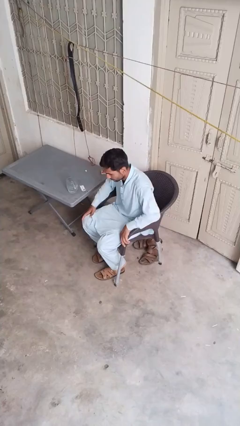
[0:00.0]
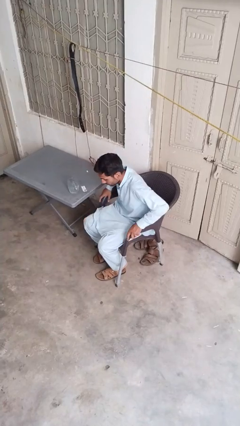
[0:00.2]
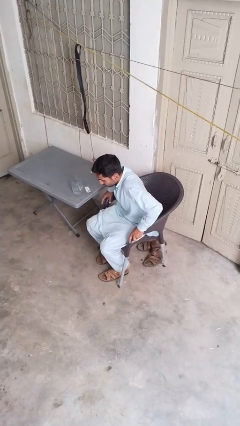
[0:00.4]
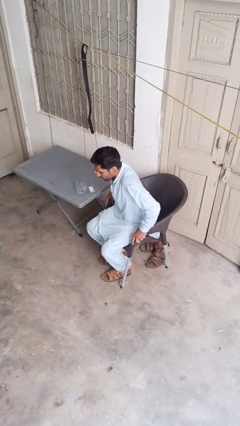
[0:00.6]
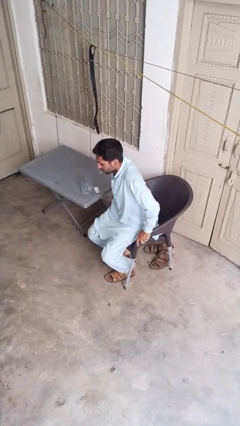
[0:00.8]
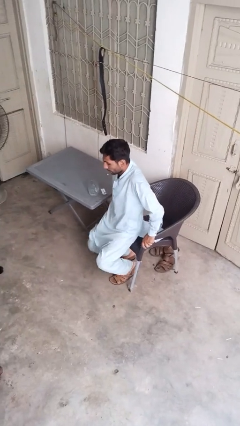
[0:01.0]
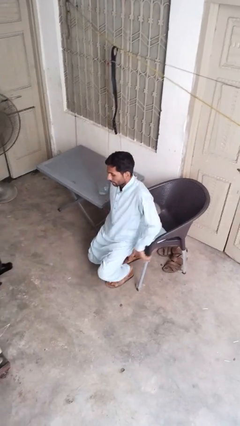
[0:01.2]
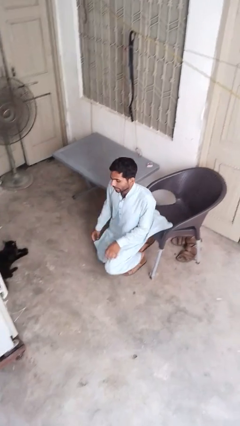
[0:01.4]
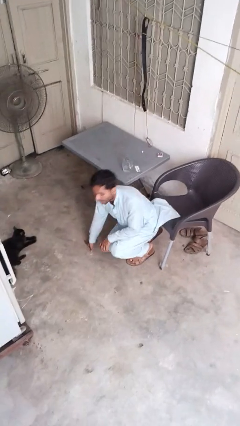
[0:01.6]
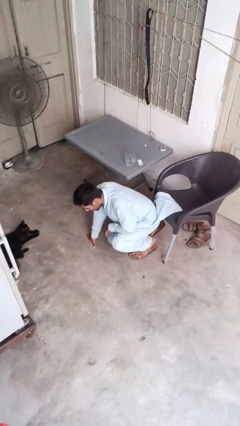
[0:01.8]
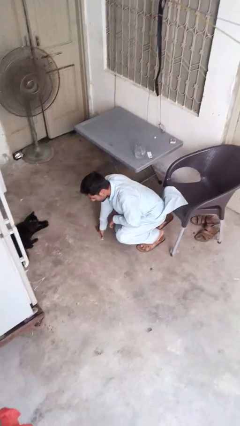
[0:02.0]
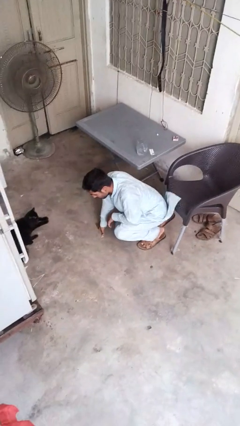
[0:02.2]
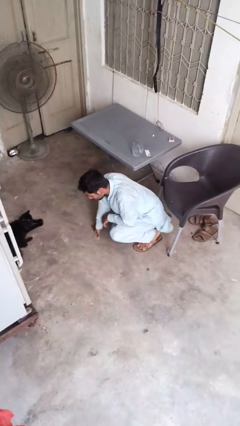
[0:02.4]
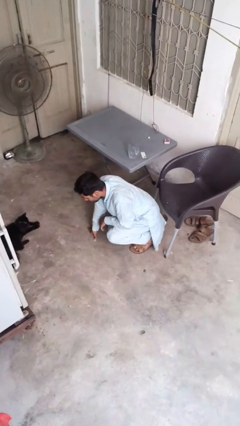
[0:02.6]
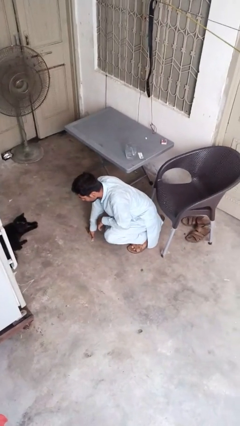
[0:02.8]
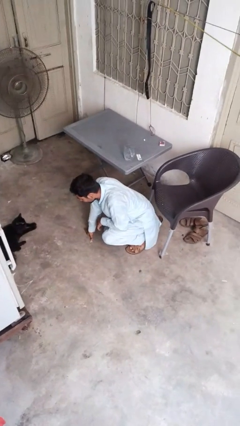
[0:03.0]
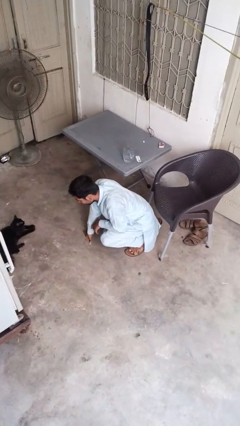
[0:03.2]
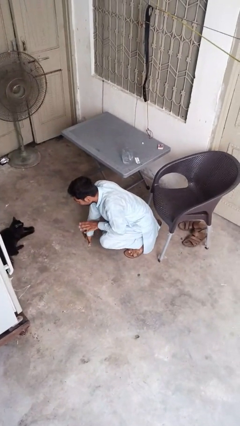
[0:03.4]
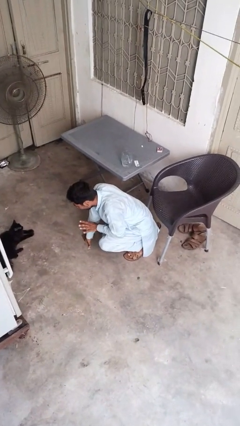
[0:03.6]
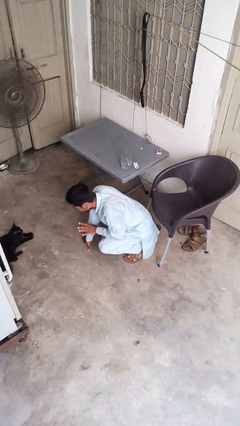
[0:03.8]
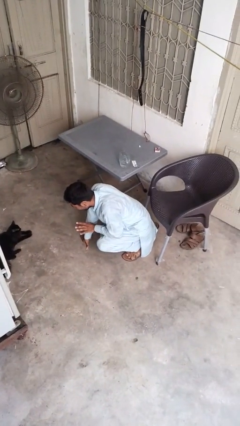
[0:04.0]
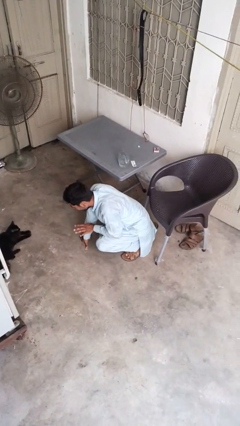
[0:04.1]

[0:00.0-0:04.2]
person falls from chair

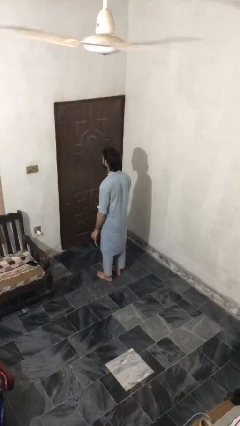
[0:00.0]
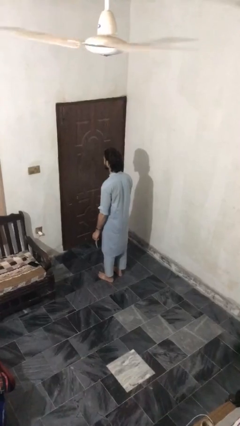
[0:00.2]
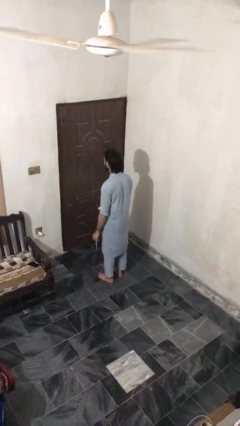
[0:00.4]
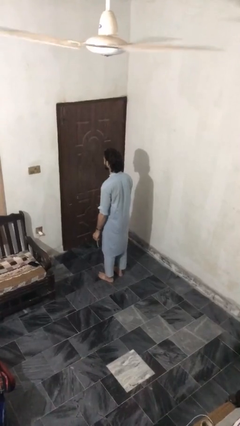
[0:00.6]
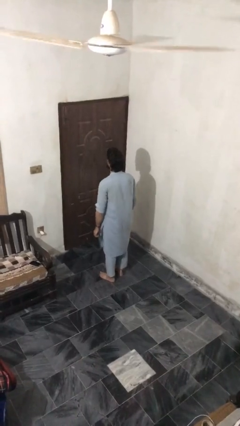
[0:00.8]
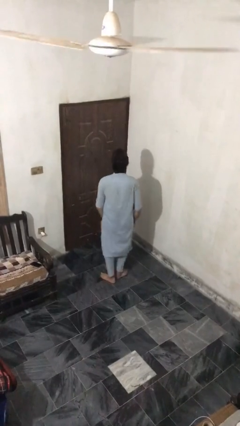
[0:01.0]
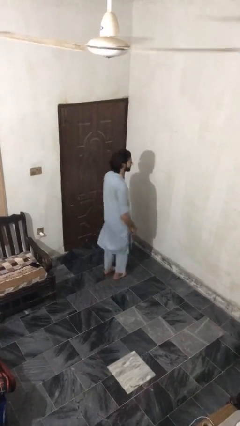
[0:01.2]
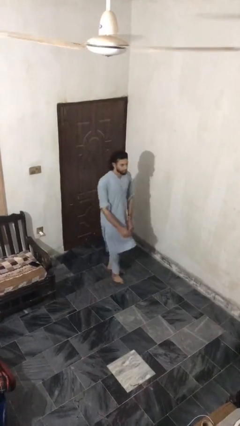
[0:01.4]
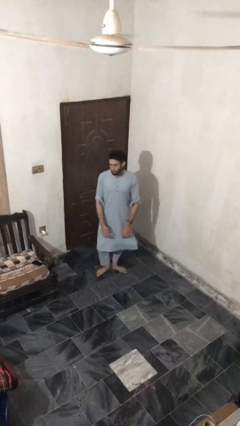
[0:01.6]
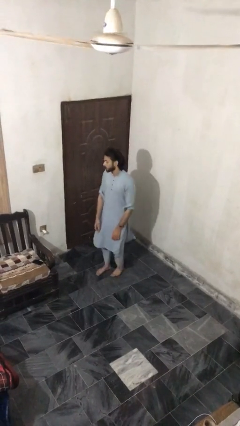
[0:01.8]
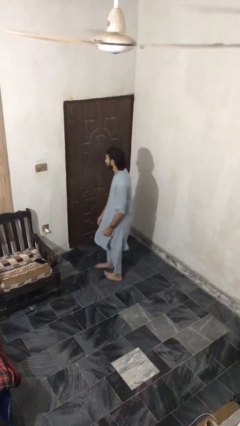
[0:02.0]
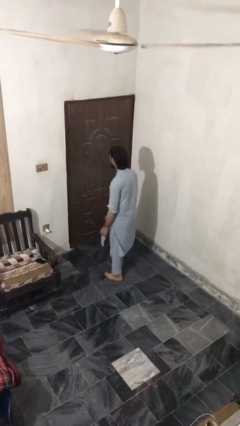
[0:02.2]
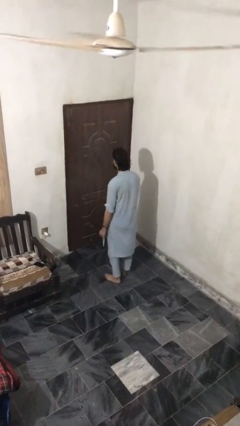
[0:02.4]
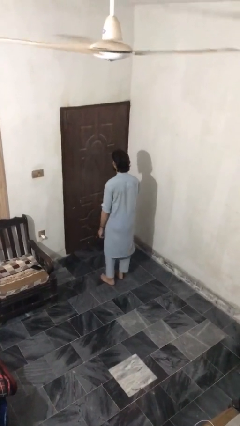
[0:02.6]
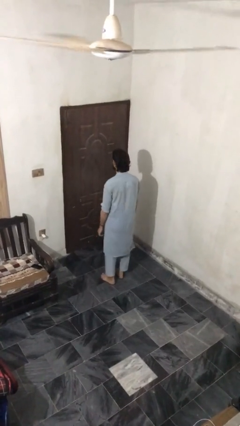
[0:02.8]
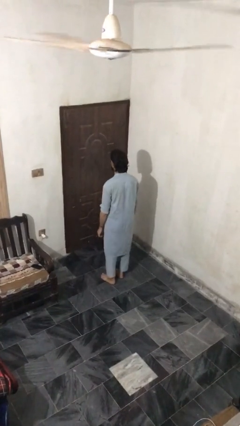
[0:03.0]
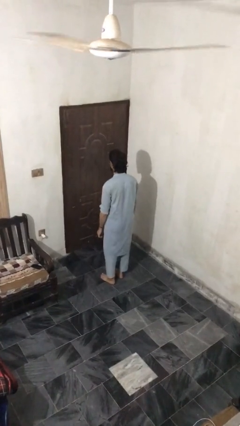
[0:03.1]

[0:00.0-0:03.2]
person twirls

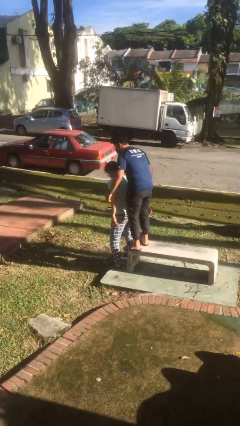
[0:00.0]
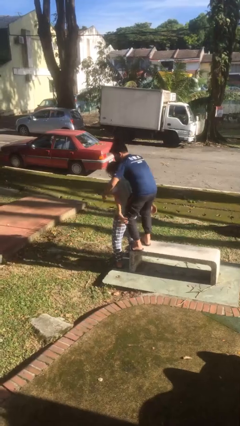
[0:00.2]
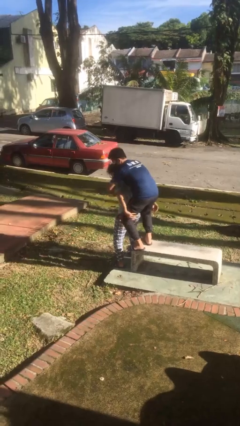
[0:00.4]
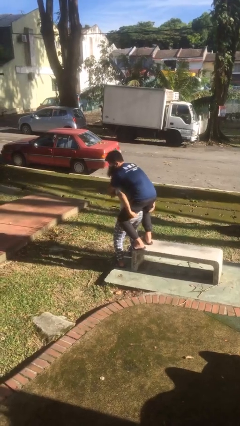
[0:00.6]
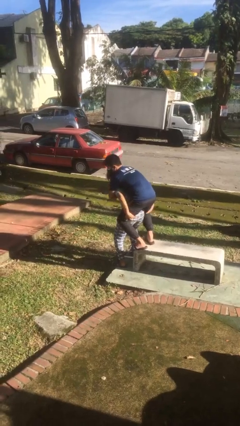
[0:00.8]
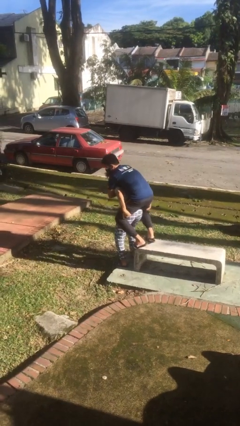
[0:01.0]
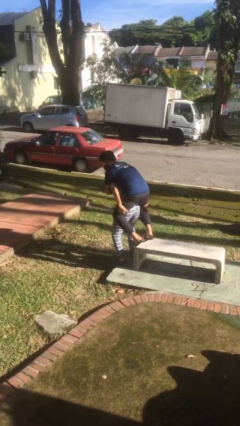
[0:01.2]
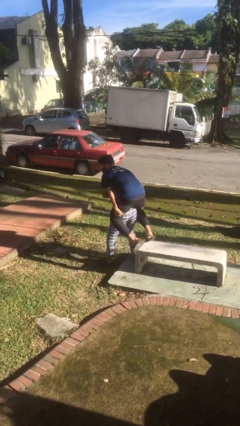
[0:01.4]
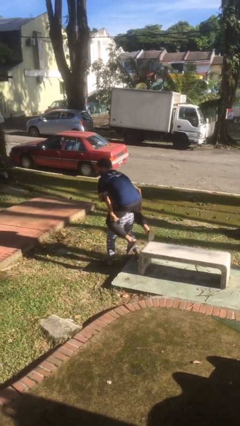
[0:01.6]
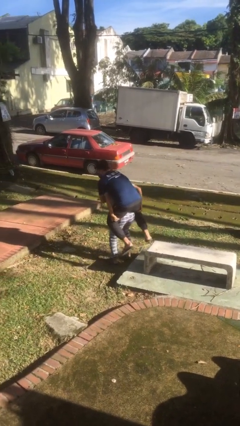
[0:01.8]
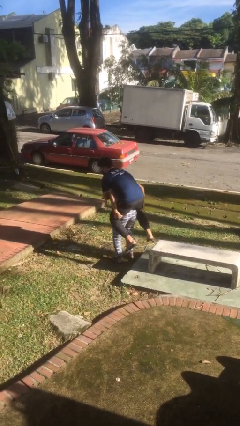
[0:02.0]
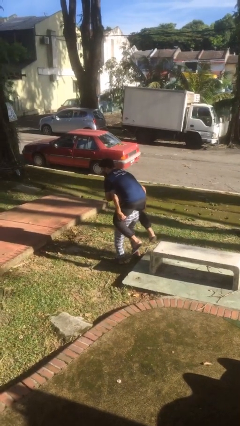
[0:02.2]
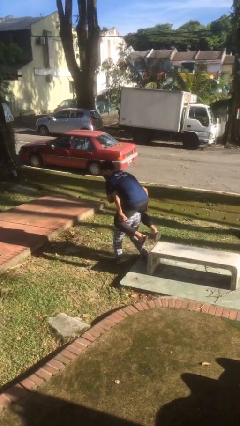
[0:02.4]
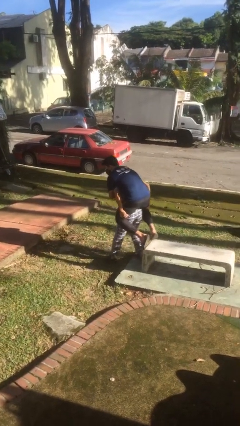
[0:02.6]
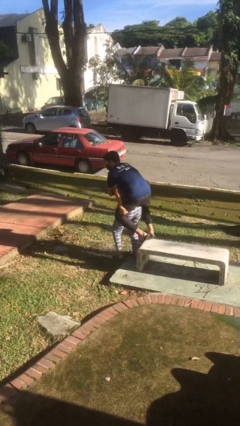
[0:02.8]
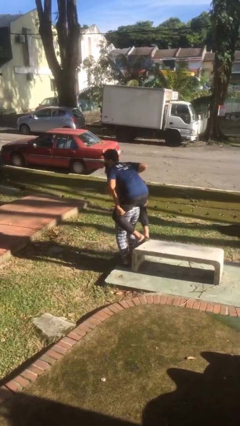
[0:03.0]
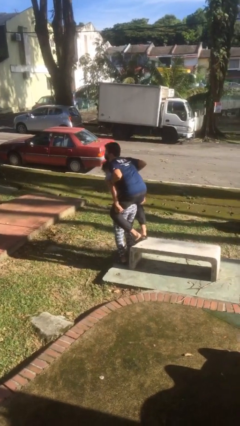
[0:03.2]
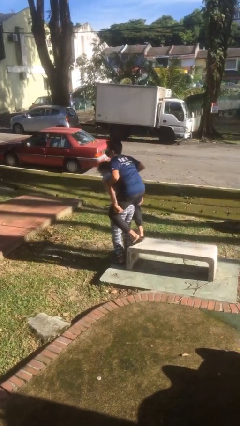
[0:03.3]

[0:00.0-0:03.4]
person carries person on shoulders

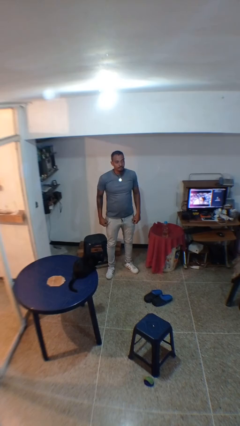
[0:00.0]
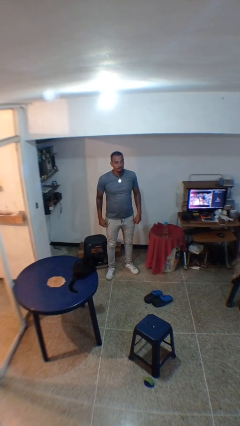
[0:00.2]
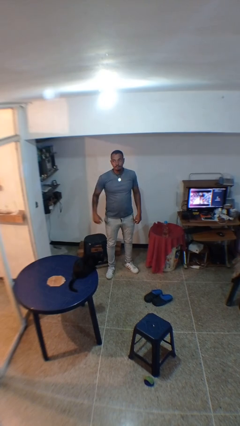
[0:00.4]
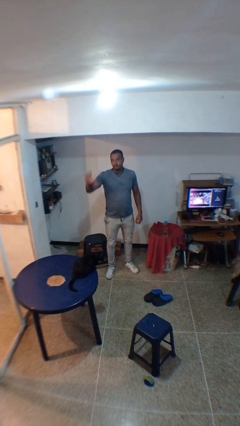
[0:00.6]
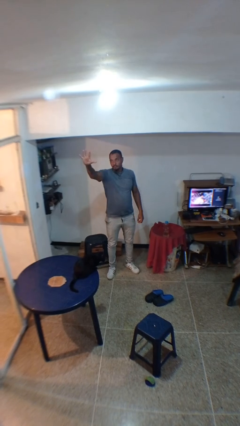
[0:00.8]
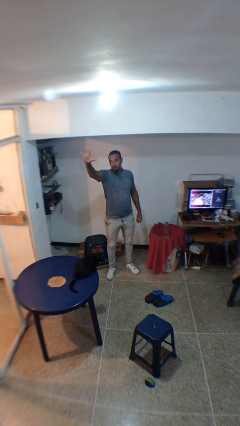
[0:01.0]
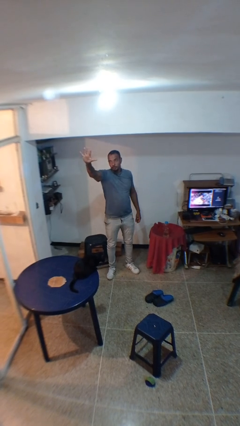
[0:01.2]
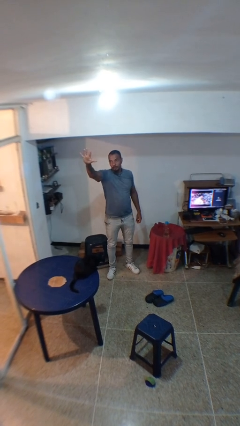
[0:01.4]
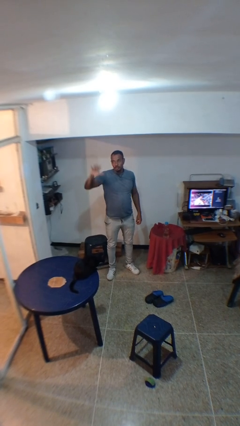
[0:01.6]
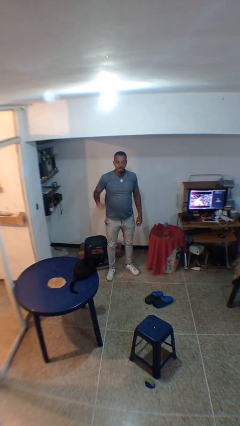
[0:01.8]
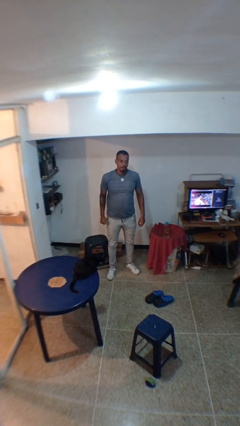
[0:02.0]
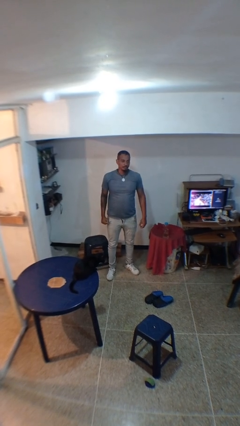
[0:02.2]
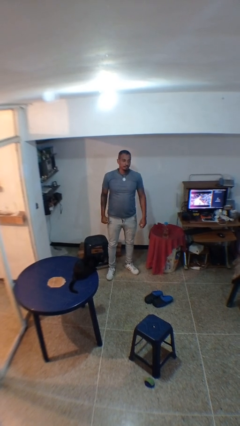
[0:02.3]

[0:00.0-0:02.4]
person gestures number five

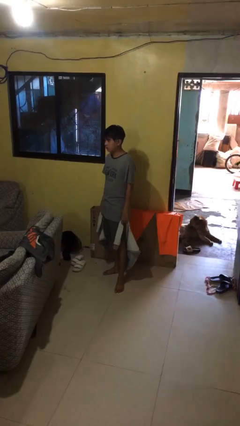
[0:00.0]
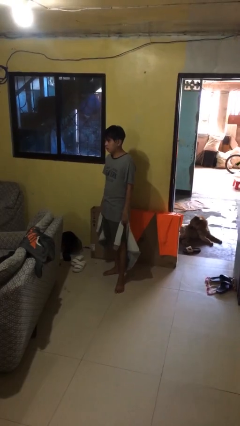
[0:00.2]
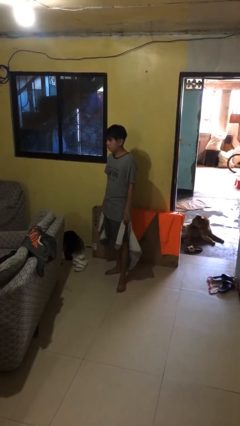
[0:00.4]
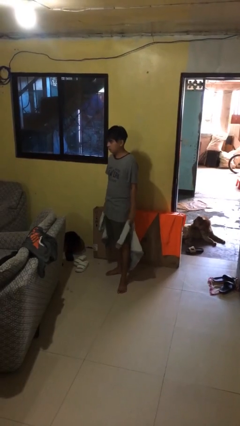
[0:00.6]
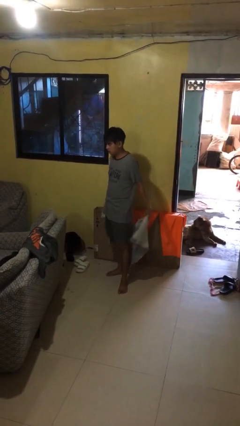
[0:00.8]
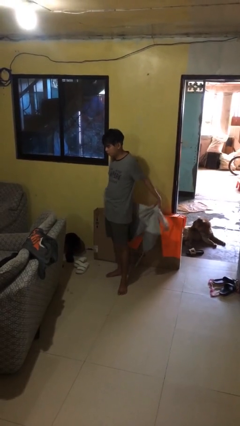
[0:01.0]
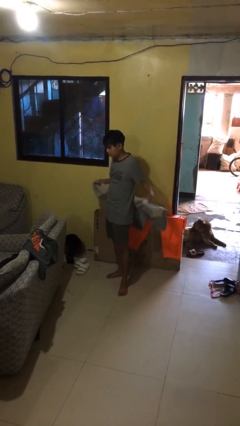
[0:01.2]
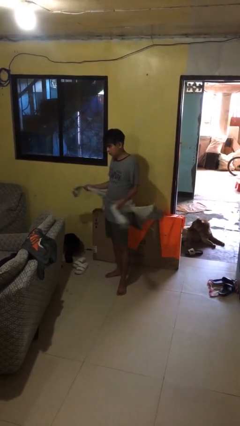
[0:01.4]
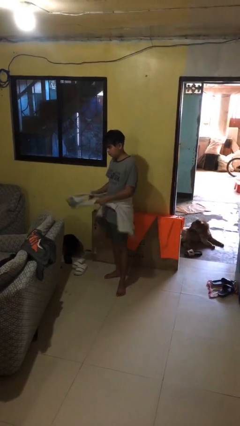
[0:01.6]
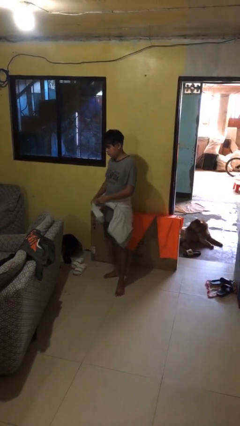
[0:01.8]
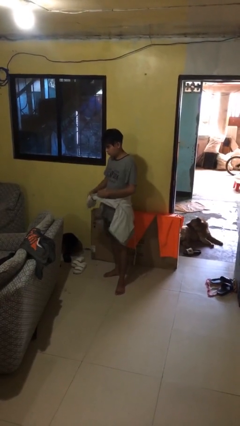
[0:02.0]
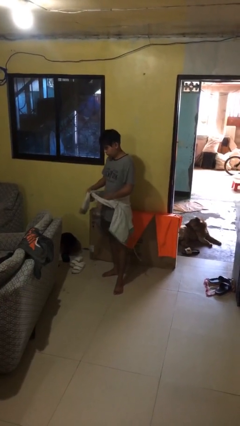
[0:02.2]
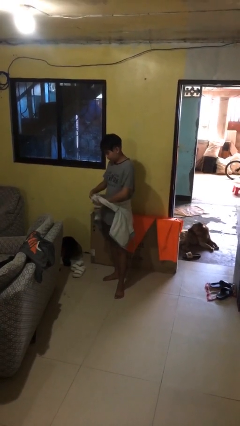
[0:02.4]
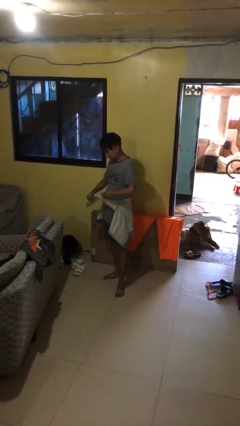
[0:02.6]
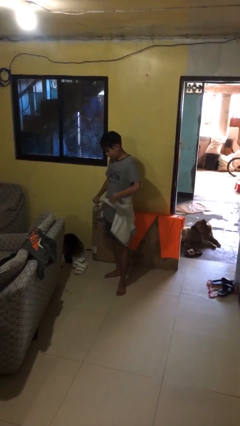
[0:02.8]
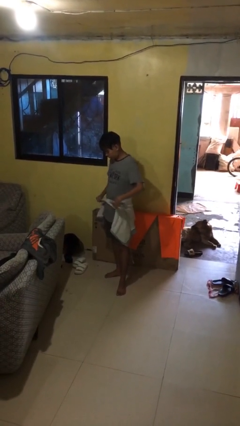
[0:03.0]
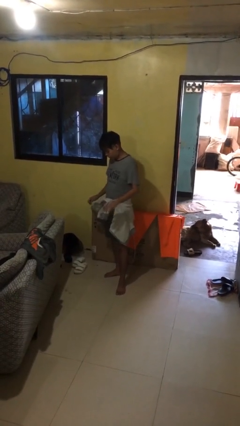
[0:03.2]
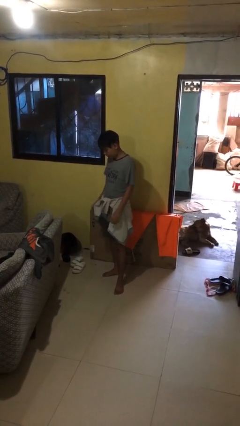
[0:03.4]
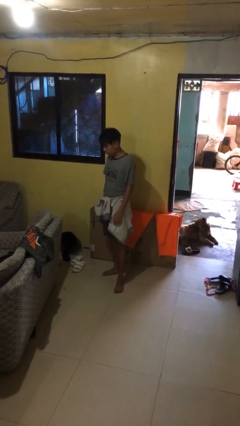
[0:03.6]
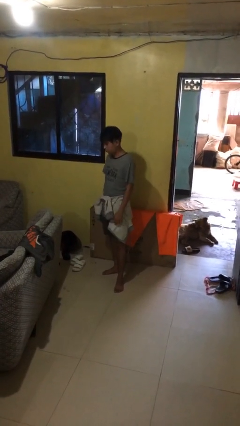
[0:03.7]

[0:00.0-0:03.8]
person ties jacket around waist

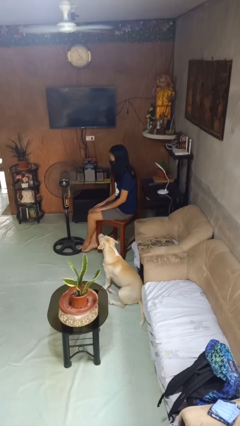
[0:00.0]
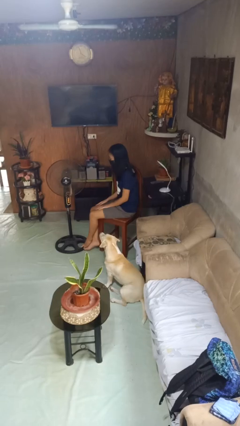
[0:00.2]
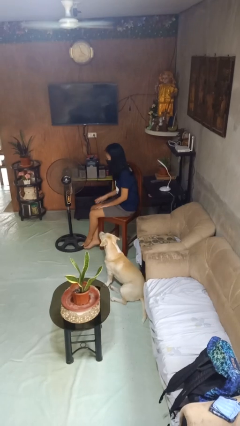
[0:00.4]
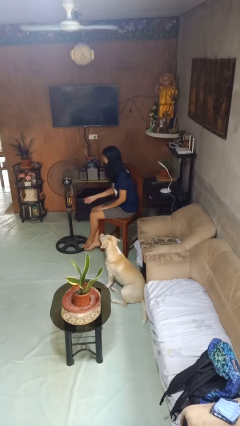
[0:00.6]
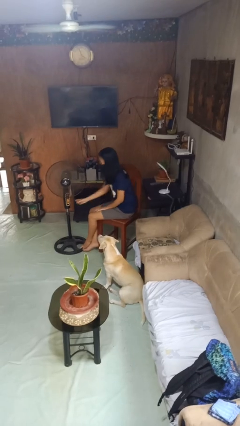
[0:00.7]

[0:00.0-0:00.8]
person turns off fan
